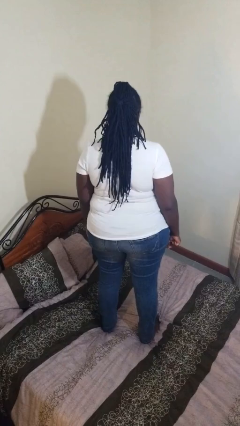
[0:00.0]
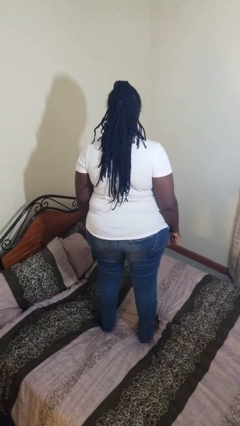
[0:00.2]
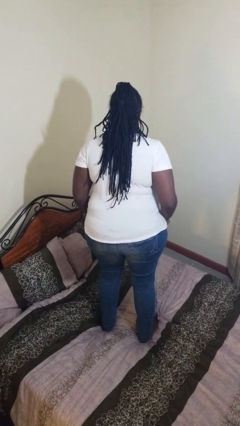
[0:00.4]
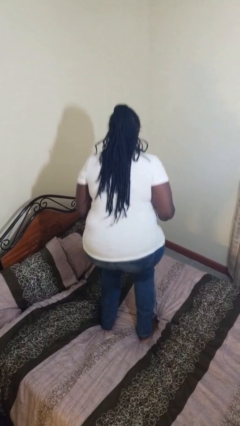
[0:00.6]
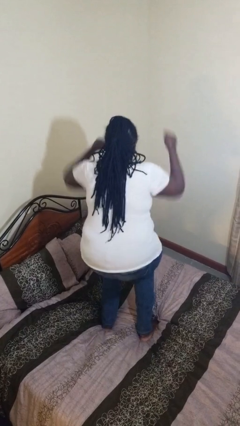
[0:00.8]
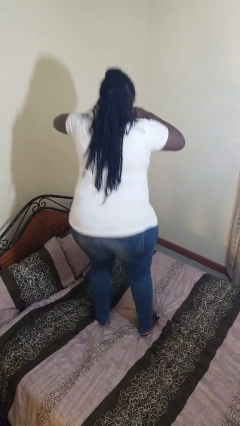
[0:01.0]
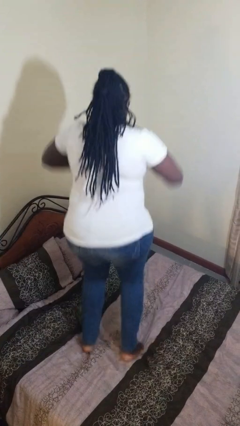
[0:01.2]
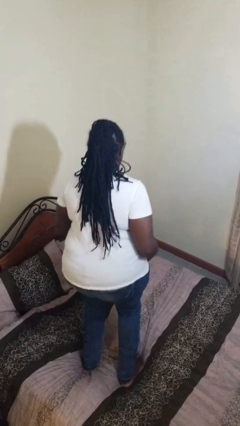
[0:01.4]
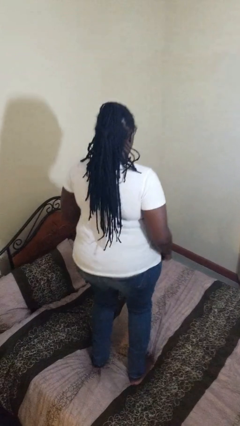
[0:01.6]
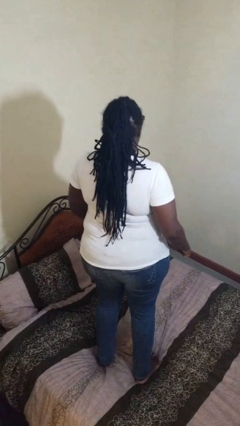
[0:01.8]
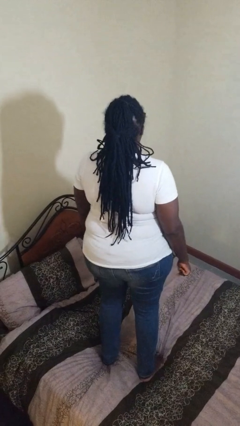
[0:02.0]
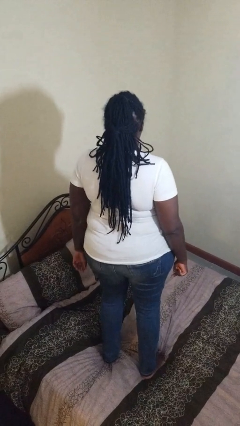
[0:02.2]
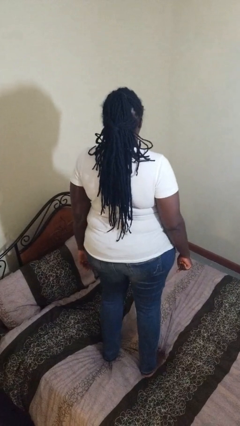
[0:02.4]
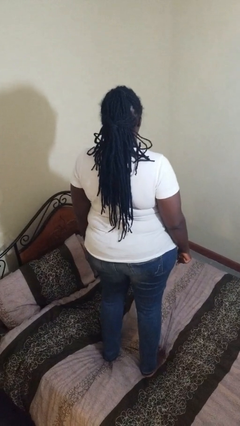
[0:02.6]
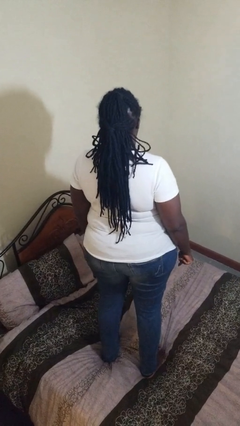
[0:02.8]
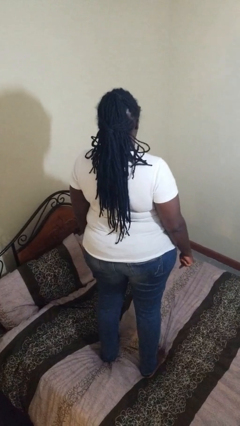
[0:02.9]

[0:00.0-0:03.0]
person jumps on bed

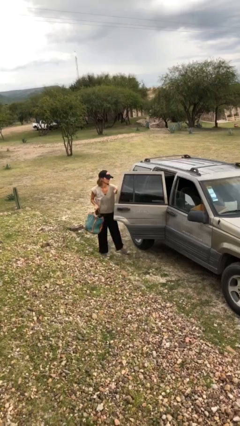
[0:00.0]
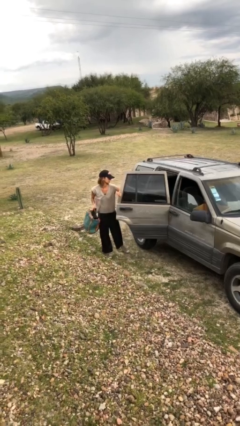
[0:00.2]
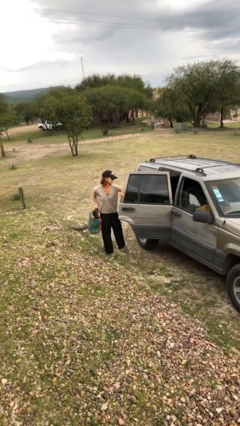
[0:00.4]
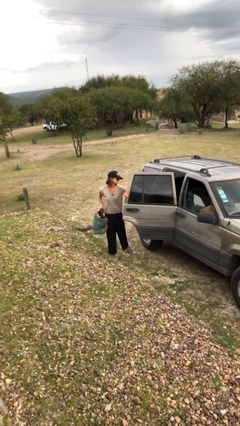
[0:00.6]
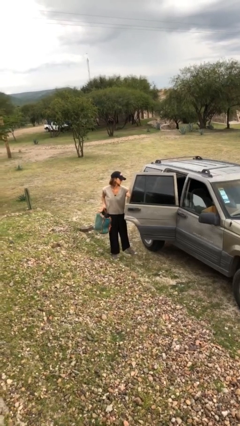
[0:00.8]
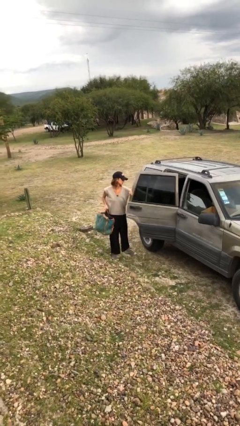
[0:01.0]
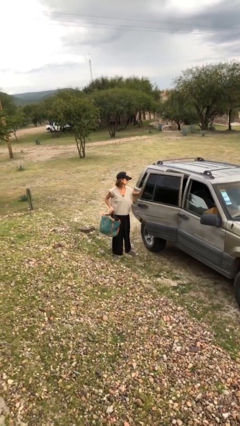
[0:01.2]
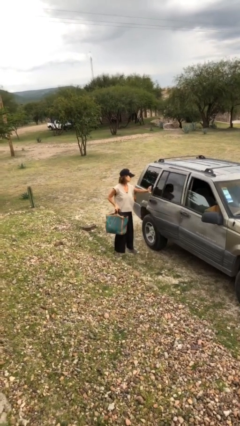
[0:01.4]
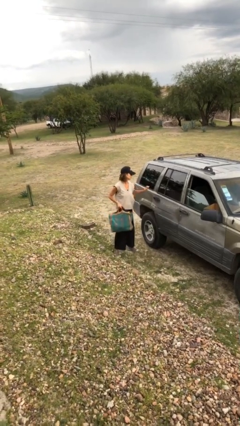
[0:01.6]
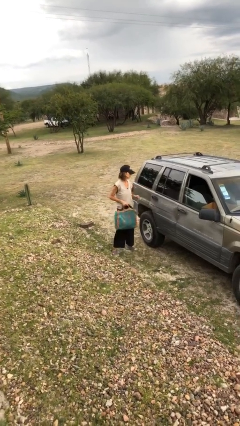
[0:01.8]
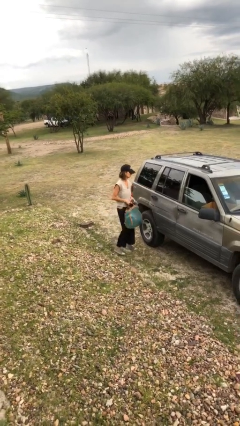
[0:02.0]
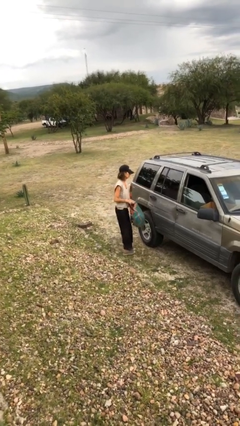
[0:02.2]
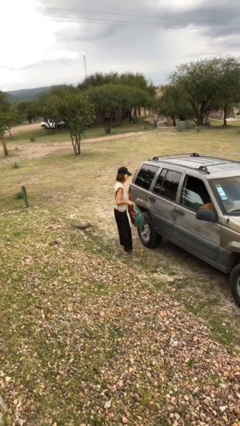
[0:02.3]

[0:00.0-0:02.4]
person closes car door

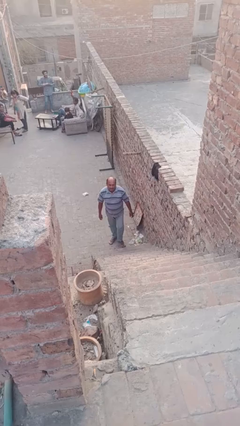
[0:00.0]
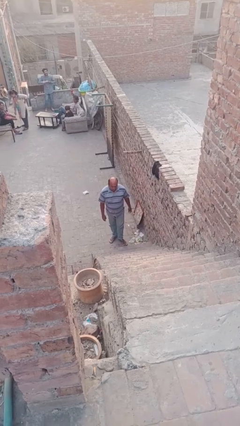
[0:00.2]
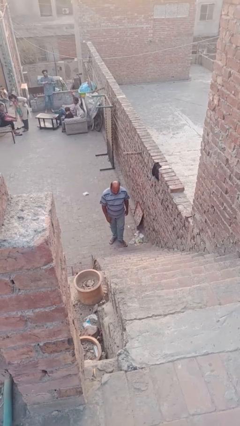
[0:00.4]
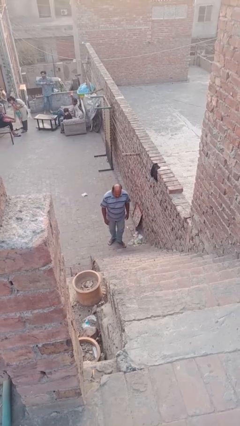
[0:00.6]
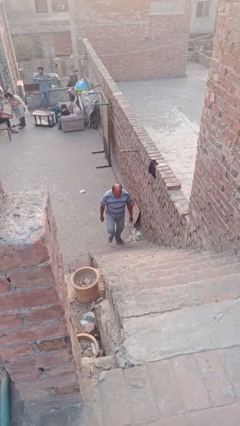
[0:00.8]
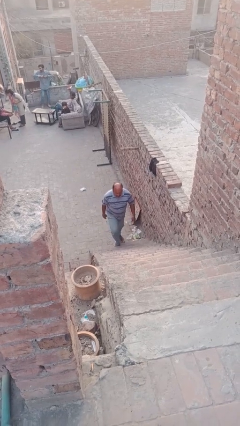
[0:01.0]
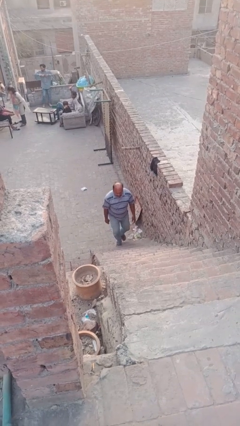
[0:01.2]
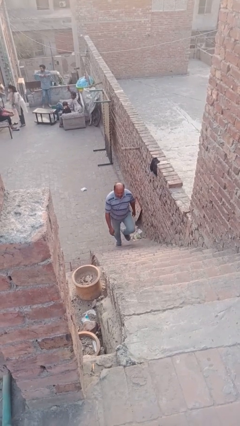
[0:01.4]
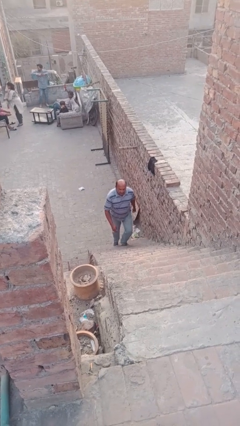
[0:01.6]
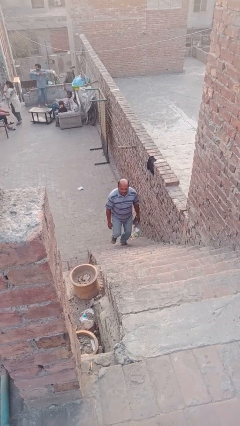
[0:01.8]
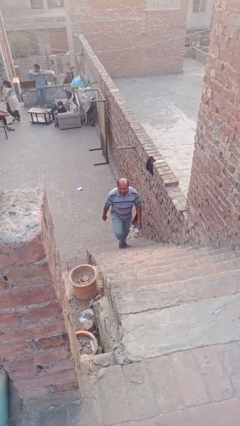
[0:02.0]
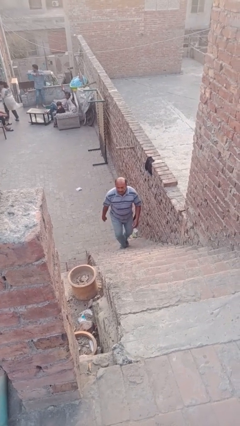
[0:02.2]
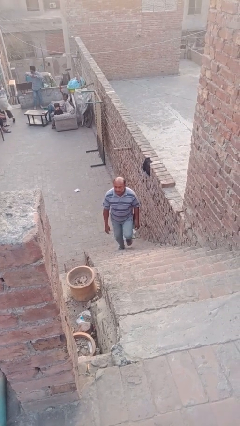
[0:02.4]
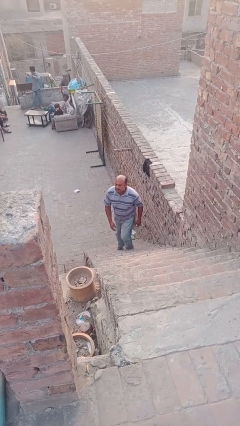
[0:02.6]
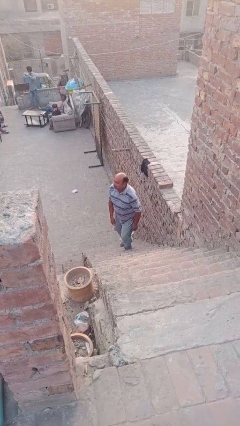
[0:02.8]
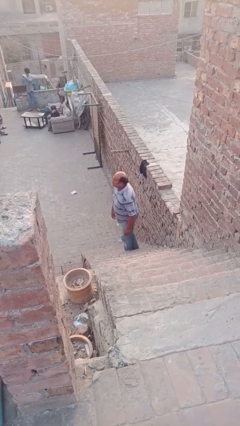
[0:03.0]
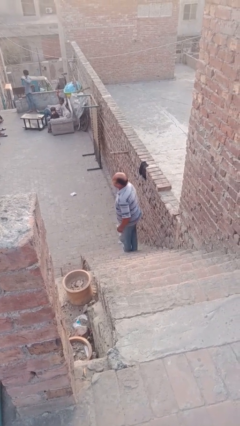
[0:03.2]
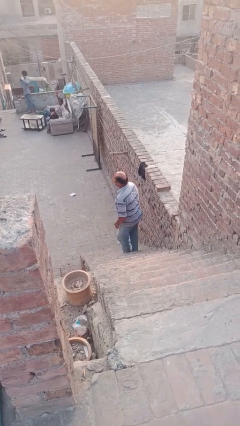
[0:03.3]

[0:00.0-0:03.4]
person climbs up stairs

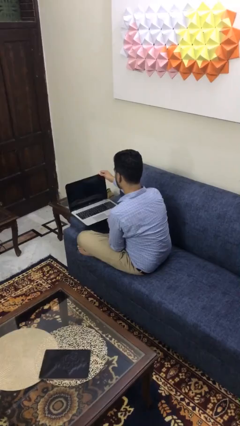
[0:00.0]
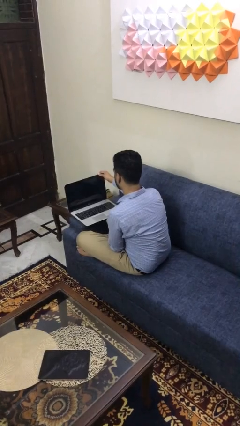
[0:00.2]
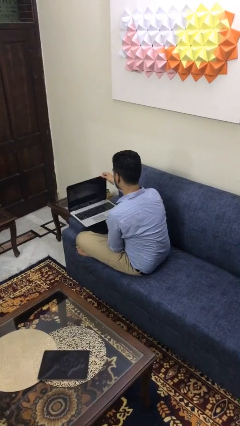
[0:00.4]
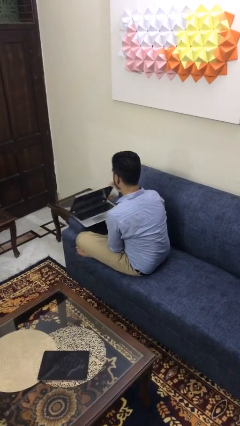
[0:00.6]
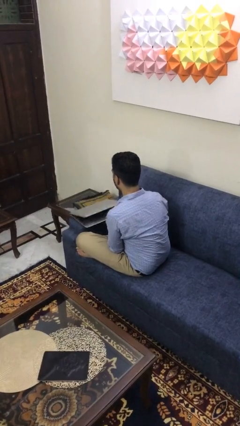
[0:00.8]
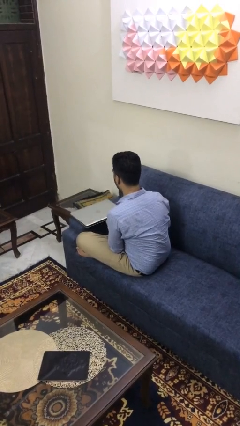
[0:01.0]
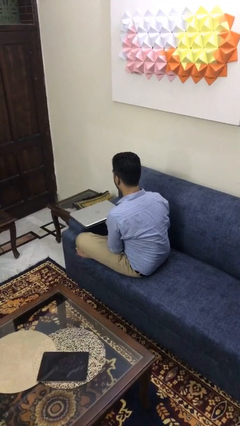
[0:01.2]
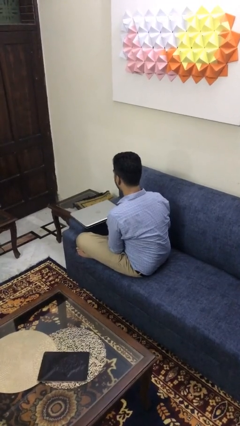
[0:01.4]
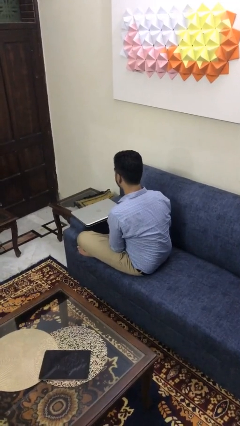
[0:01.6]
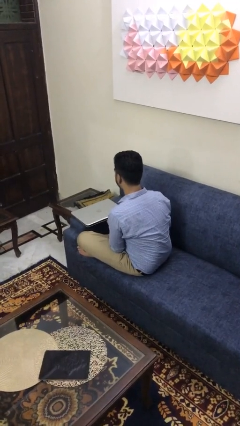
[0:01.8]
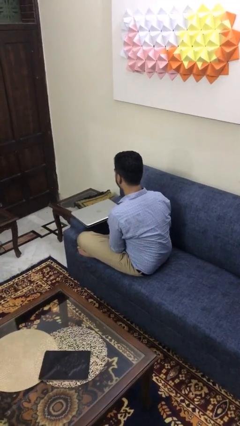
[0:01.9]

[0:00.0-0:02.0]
person closes laptop

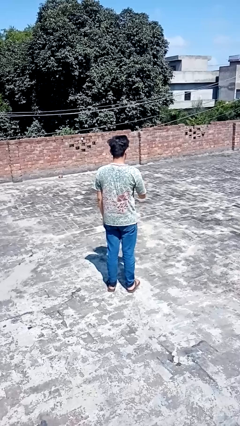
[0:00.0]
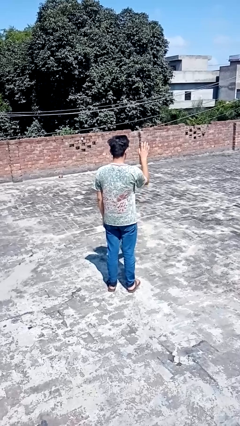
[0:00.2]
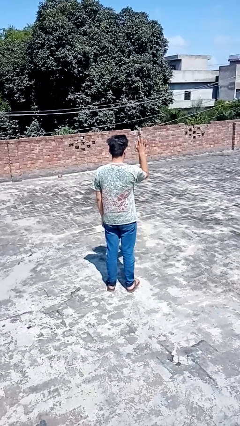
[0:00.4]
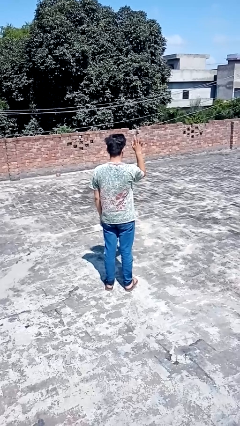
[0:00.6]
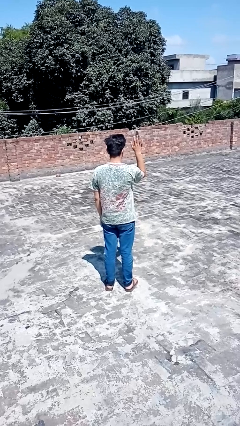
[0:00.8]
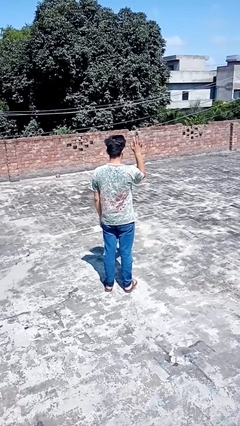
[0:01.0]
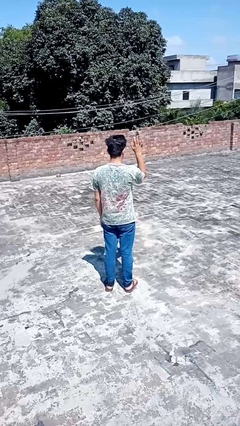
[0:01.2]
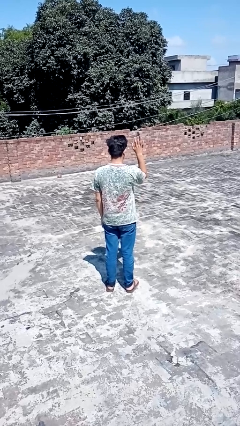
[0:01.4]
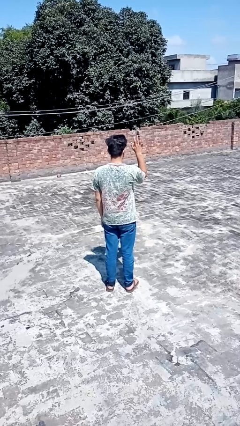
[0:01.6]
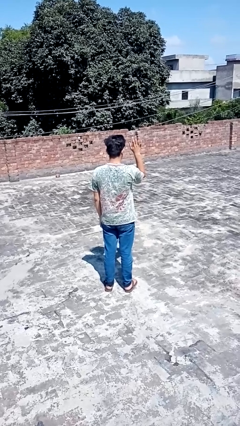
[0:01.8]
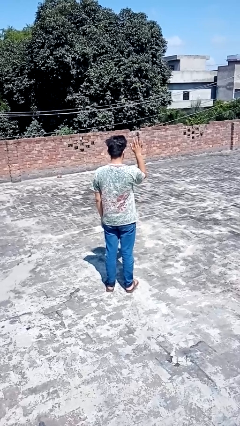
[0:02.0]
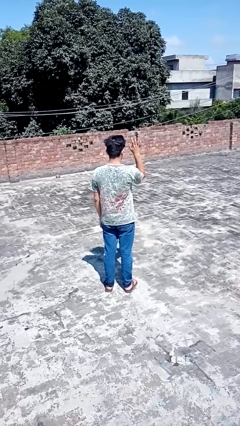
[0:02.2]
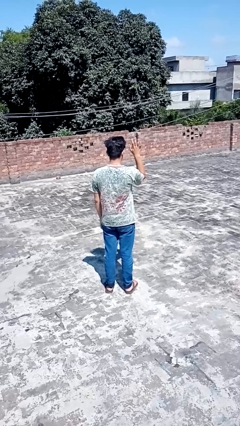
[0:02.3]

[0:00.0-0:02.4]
person gestures number five

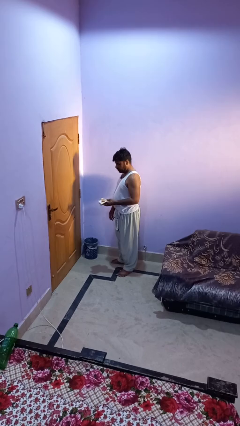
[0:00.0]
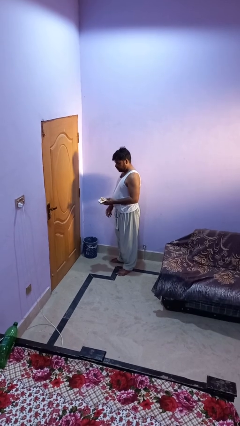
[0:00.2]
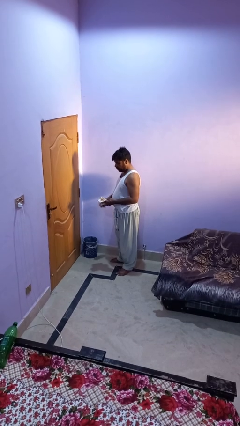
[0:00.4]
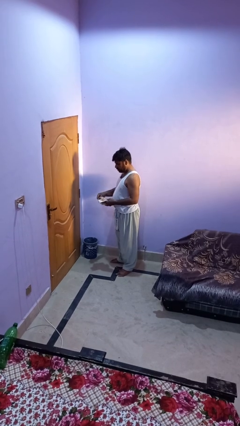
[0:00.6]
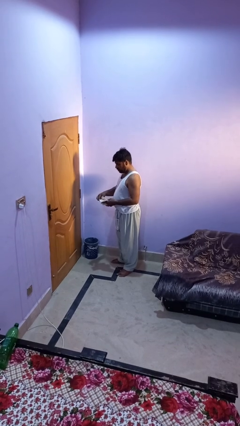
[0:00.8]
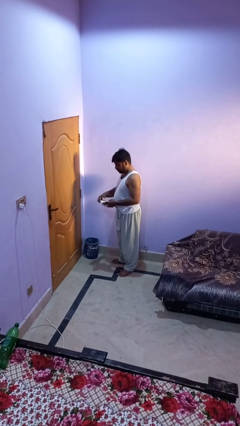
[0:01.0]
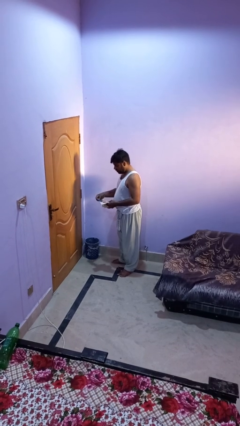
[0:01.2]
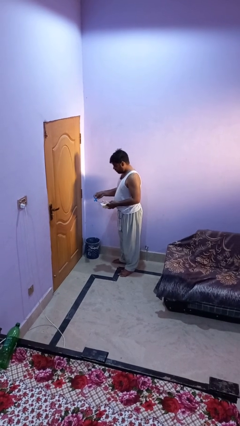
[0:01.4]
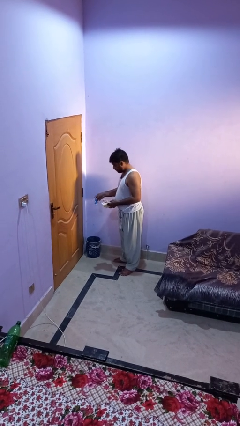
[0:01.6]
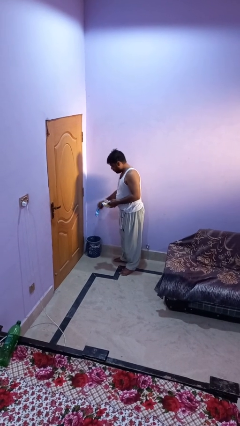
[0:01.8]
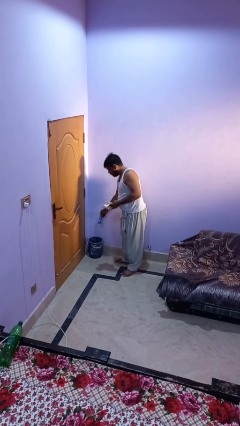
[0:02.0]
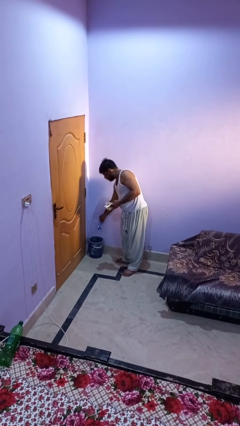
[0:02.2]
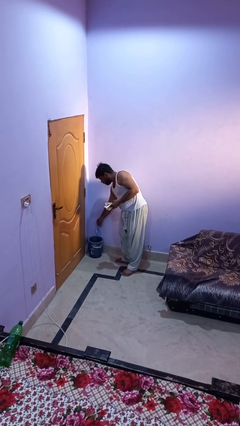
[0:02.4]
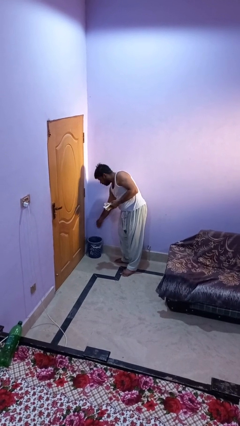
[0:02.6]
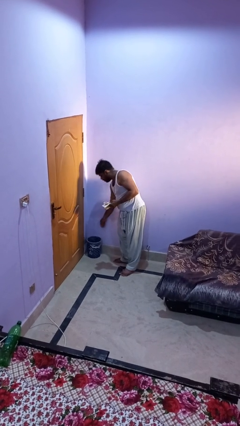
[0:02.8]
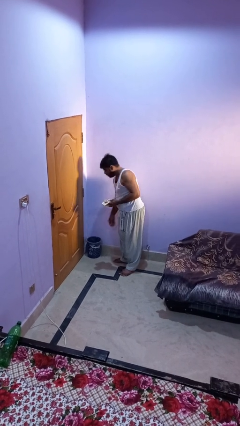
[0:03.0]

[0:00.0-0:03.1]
person discards trash

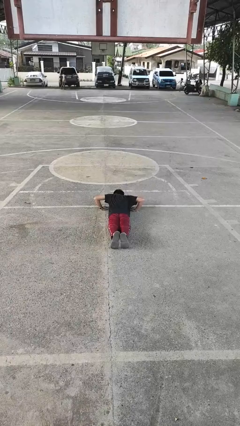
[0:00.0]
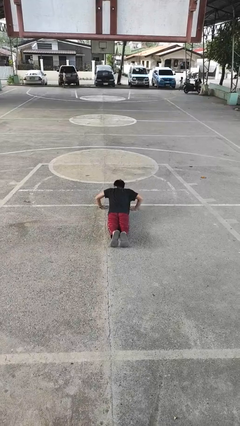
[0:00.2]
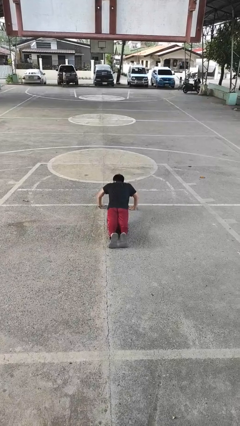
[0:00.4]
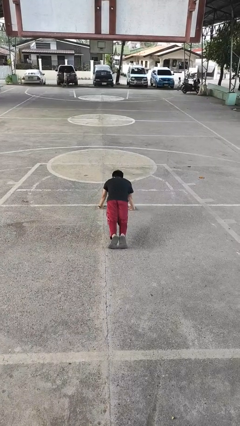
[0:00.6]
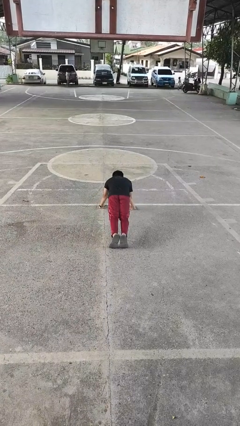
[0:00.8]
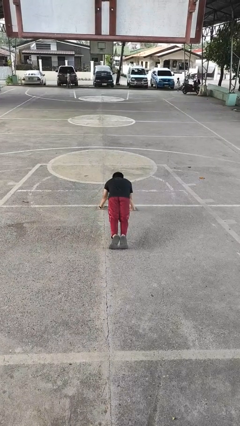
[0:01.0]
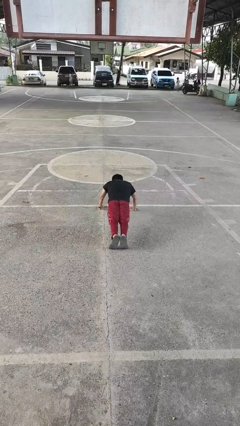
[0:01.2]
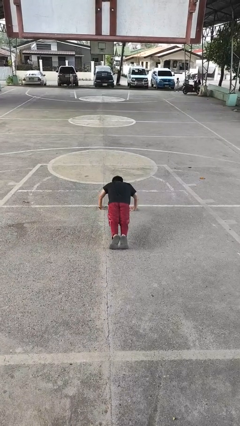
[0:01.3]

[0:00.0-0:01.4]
person exercises with pushup
